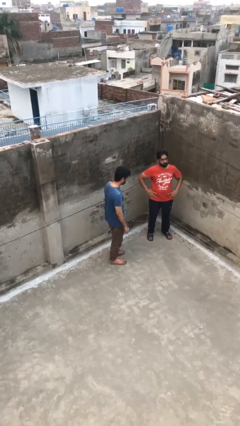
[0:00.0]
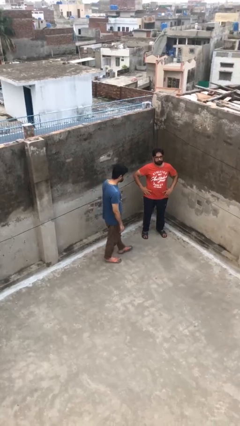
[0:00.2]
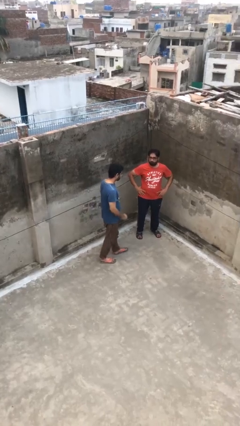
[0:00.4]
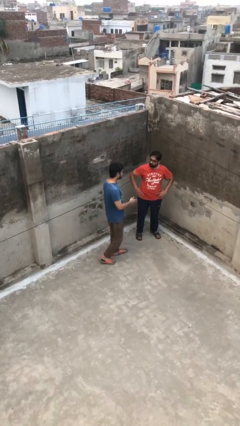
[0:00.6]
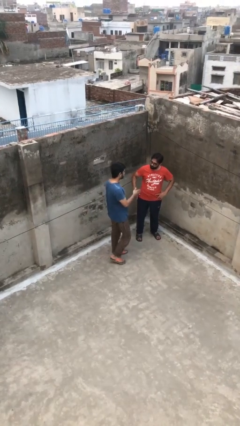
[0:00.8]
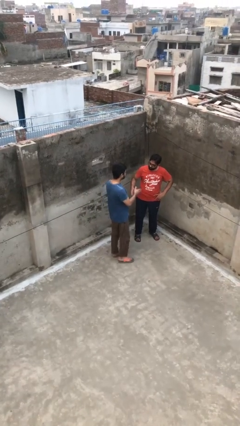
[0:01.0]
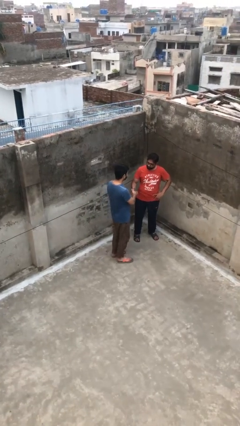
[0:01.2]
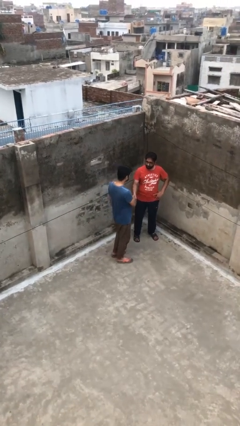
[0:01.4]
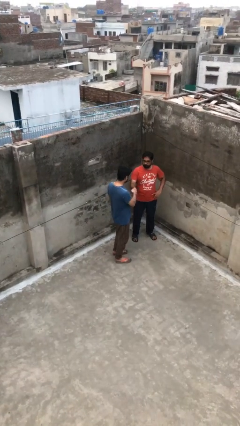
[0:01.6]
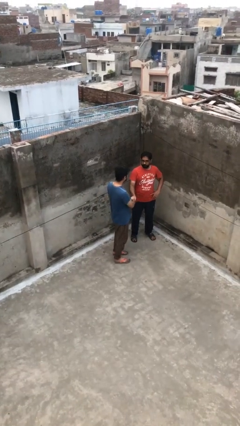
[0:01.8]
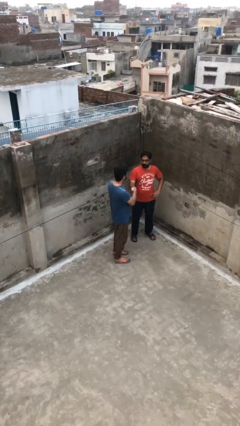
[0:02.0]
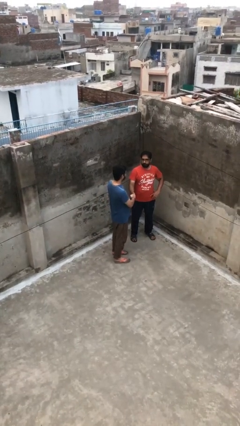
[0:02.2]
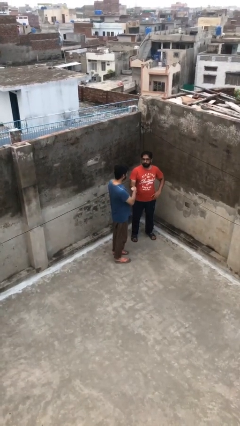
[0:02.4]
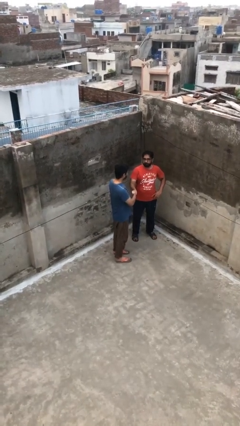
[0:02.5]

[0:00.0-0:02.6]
person shakes hand

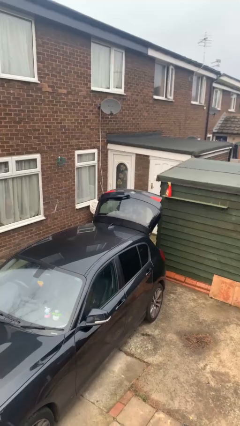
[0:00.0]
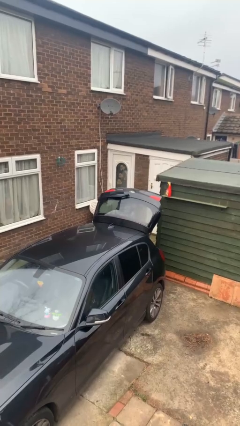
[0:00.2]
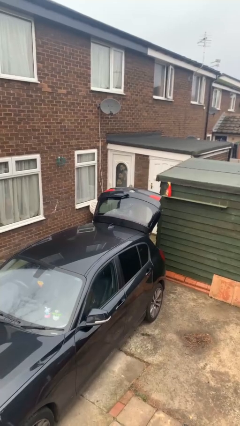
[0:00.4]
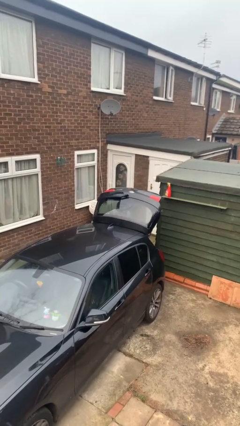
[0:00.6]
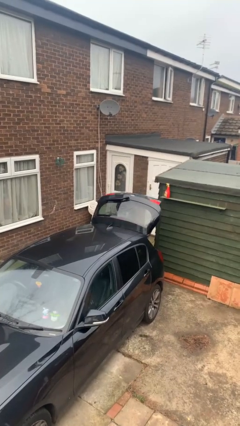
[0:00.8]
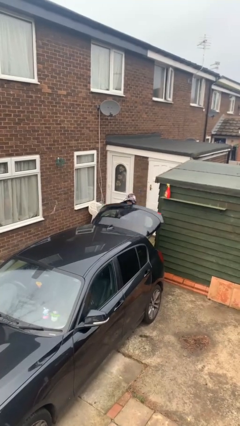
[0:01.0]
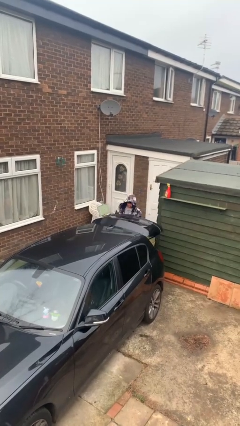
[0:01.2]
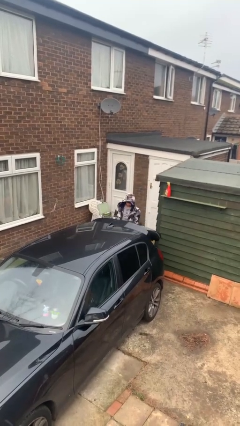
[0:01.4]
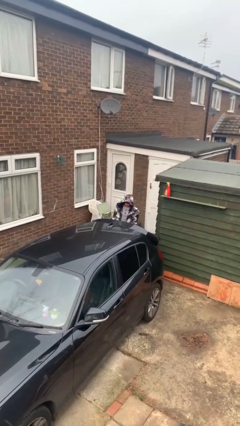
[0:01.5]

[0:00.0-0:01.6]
person closes car trunk

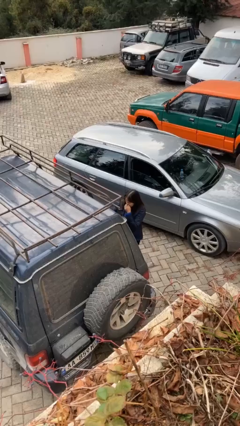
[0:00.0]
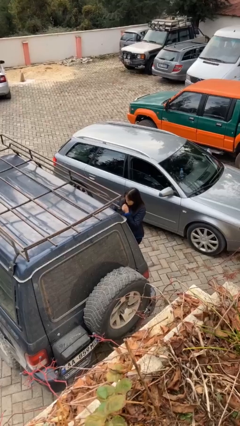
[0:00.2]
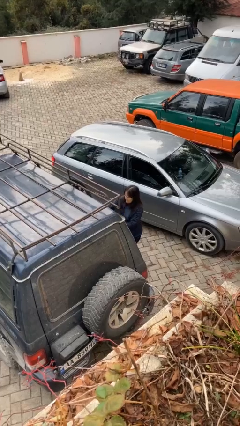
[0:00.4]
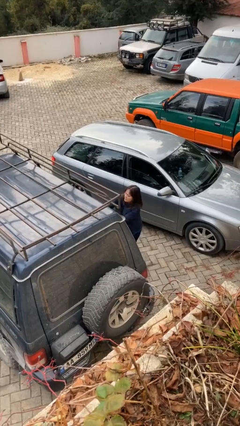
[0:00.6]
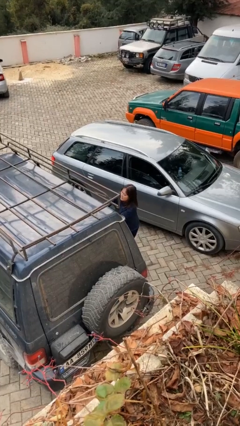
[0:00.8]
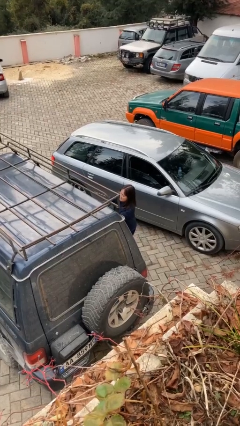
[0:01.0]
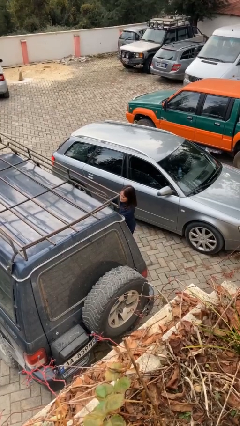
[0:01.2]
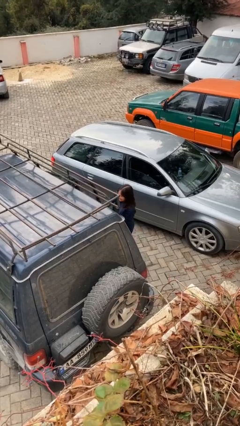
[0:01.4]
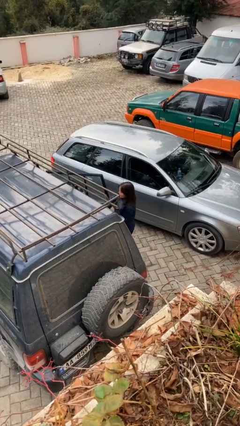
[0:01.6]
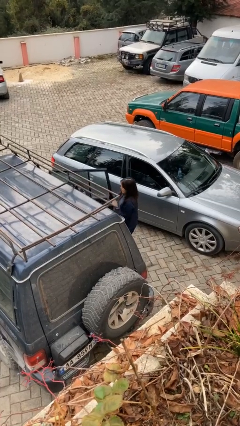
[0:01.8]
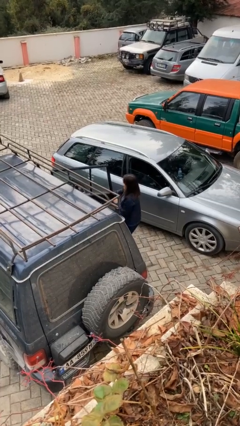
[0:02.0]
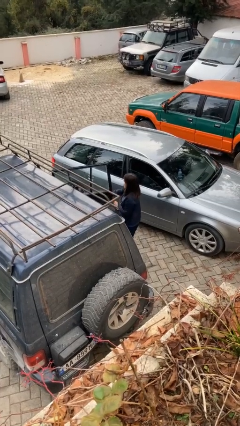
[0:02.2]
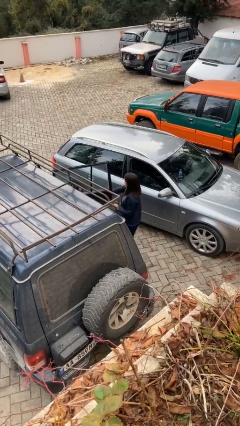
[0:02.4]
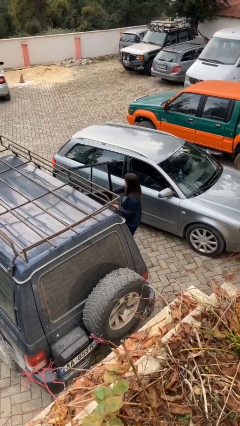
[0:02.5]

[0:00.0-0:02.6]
person opens car door

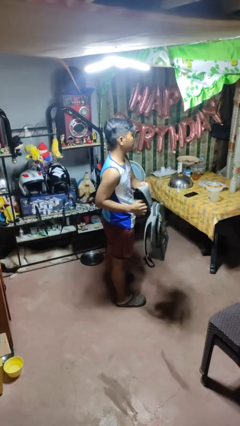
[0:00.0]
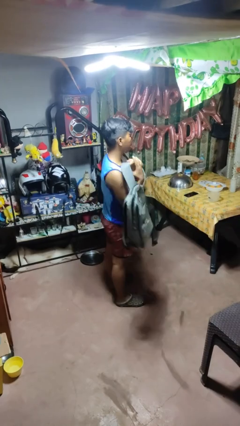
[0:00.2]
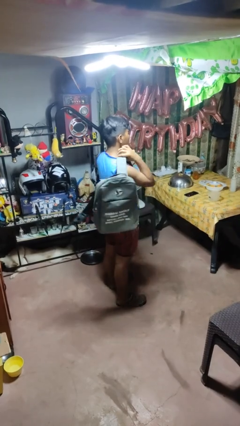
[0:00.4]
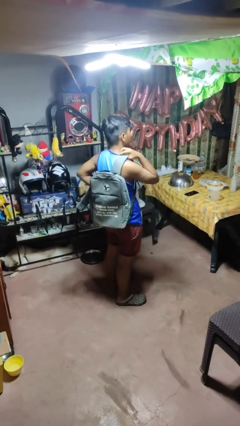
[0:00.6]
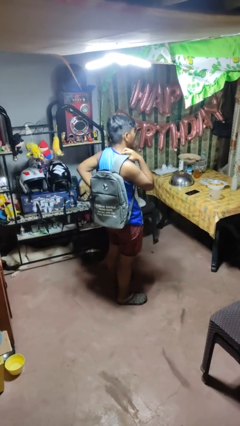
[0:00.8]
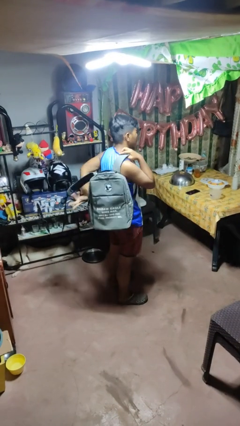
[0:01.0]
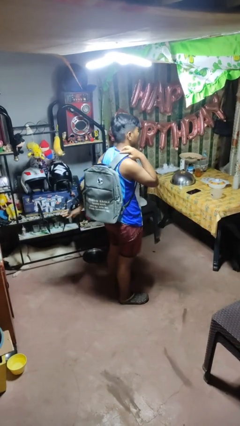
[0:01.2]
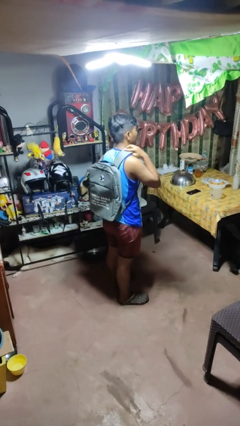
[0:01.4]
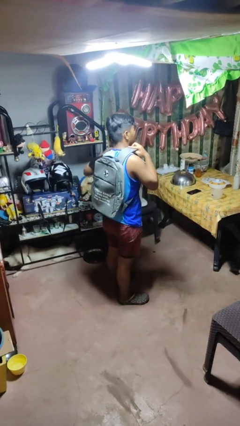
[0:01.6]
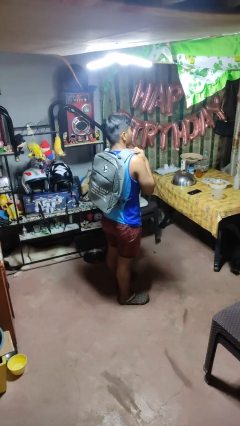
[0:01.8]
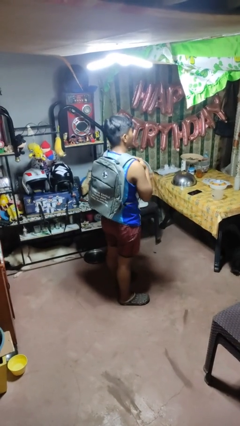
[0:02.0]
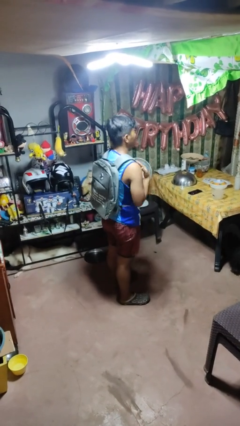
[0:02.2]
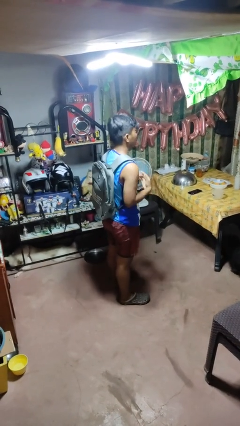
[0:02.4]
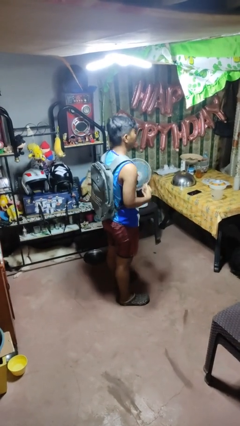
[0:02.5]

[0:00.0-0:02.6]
person puts on backpack

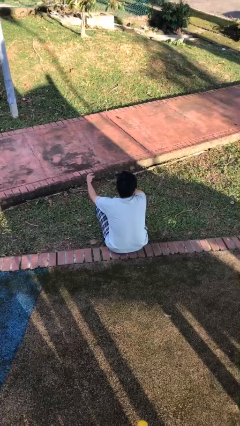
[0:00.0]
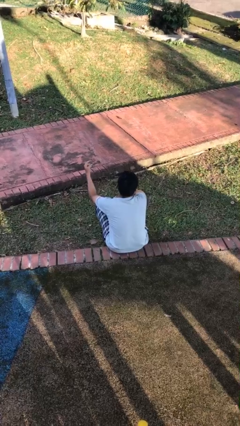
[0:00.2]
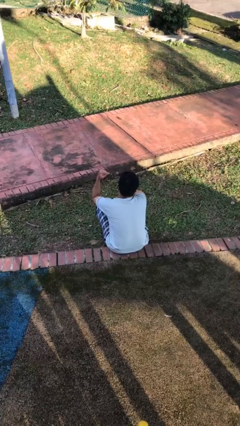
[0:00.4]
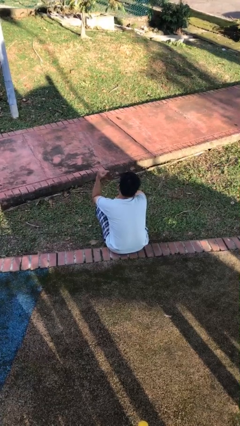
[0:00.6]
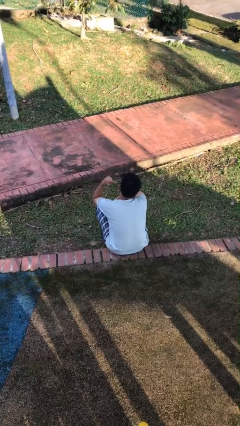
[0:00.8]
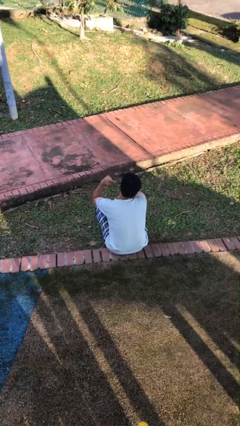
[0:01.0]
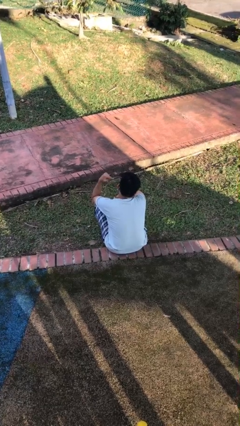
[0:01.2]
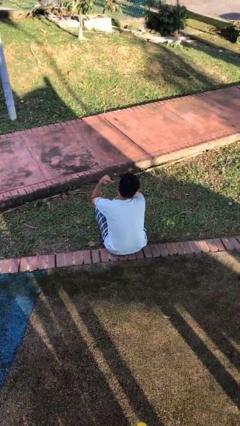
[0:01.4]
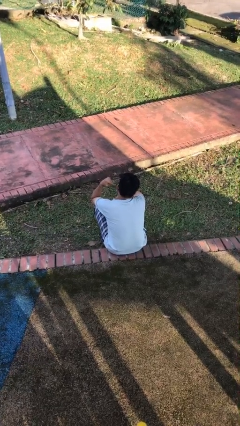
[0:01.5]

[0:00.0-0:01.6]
person gestures listen closely

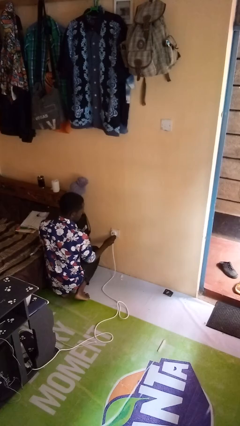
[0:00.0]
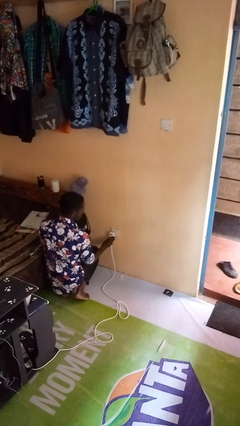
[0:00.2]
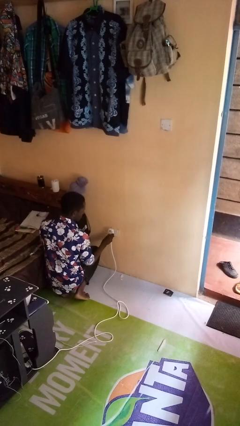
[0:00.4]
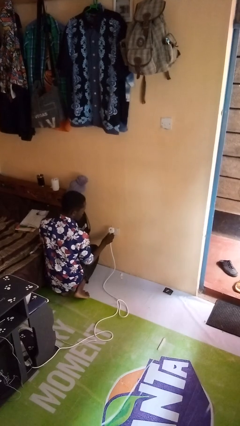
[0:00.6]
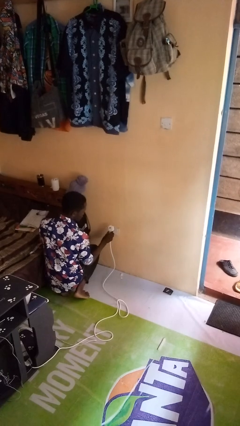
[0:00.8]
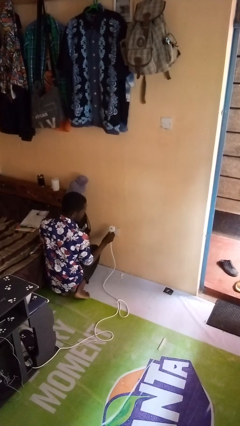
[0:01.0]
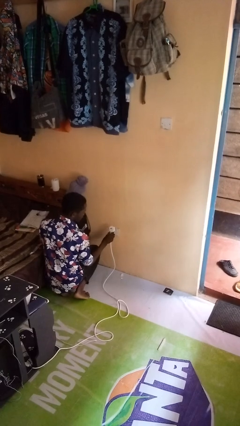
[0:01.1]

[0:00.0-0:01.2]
person unplugs from electrical socket

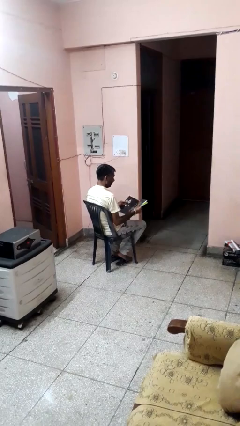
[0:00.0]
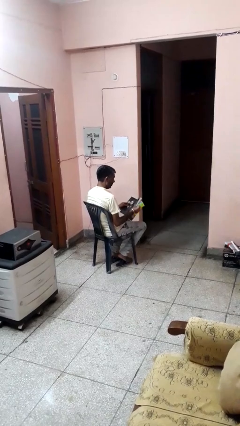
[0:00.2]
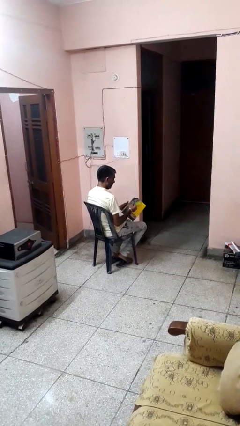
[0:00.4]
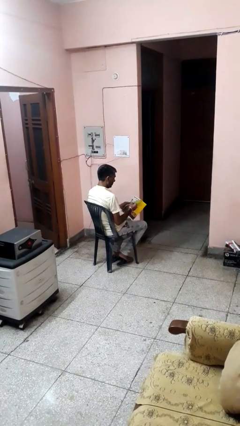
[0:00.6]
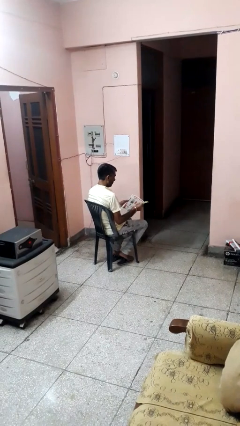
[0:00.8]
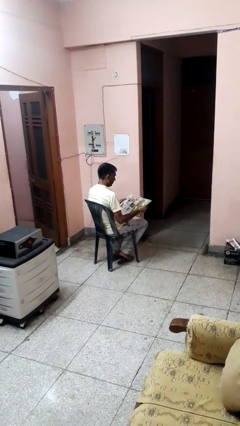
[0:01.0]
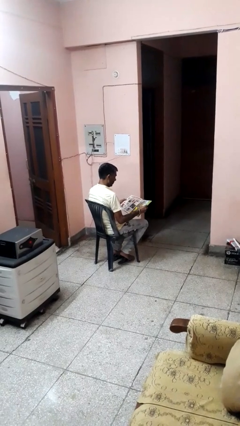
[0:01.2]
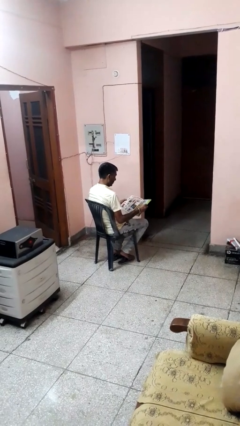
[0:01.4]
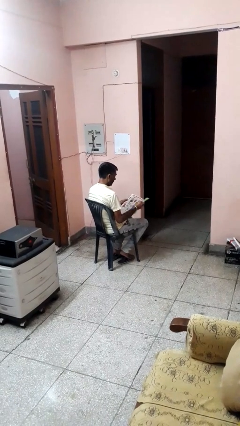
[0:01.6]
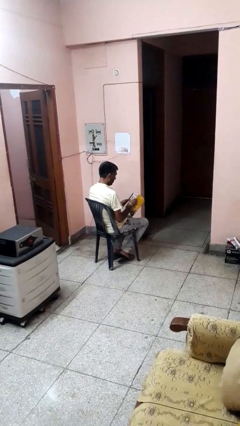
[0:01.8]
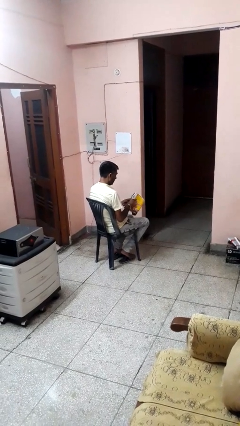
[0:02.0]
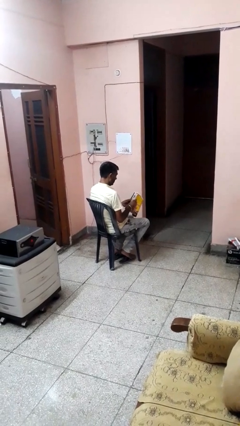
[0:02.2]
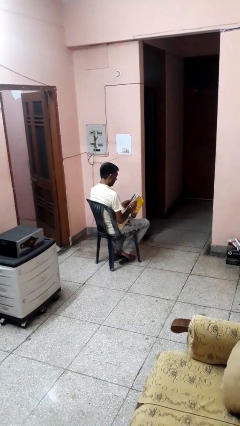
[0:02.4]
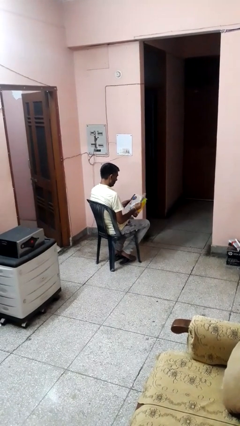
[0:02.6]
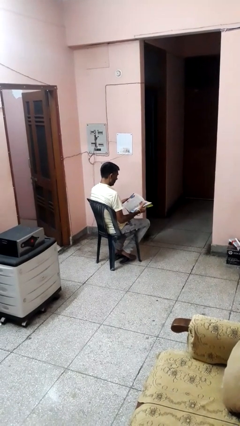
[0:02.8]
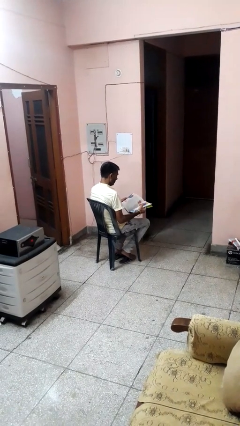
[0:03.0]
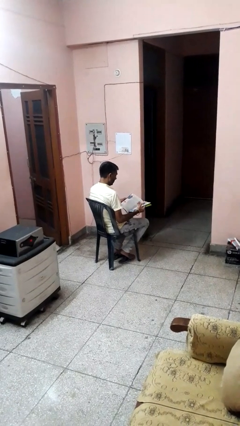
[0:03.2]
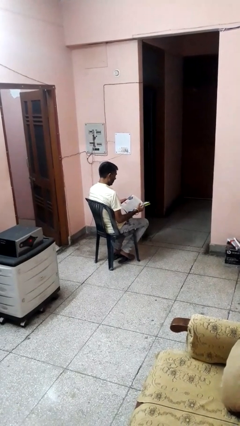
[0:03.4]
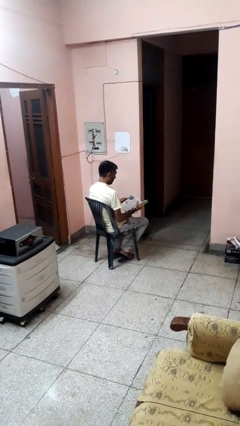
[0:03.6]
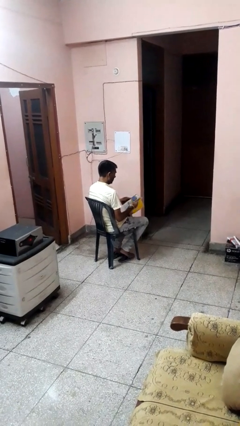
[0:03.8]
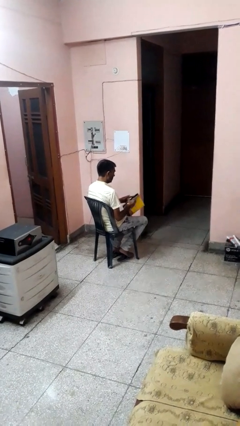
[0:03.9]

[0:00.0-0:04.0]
person reads magazine

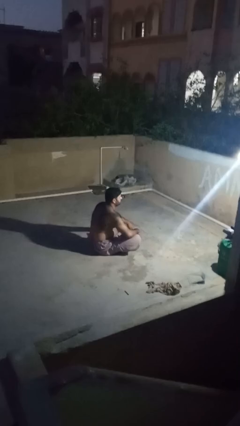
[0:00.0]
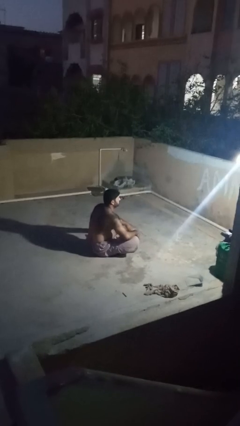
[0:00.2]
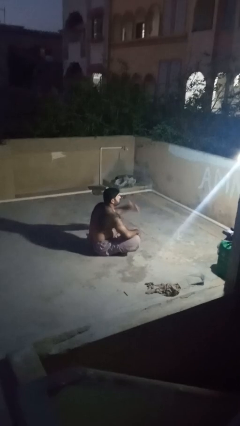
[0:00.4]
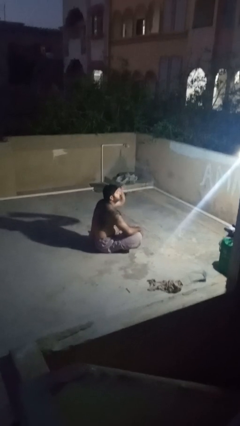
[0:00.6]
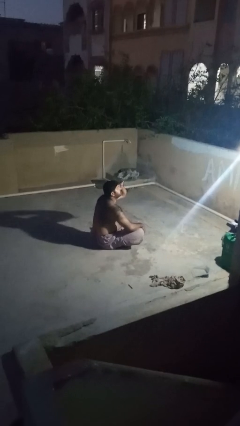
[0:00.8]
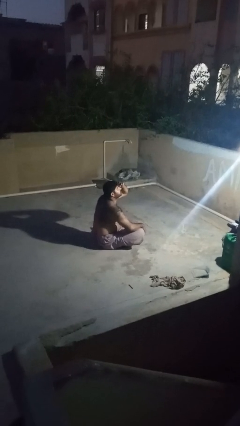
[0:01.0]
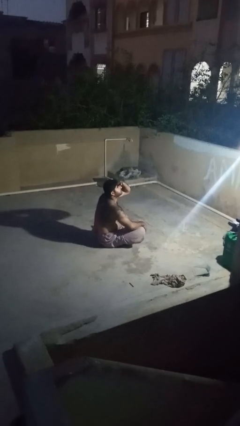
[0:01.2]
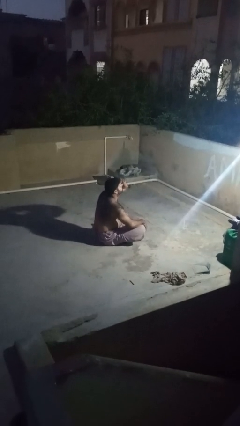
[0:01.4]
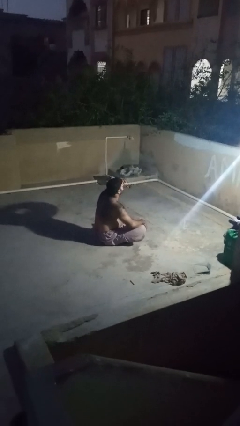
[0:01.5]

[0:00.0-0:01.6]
person shades eyes
